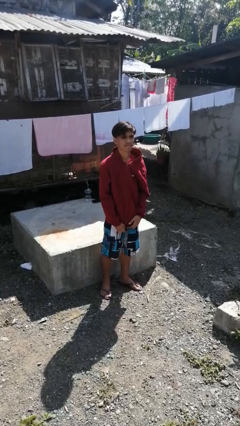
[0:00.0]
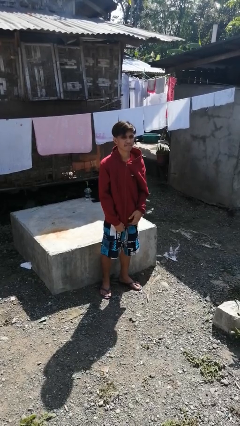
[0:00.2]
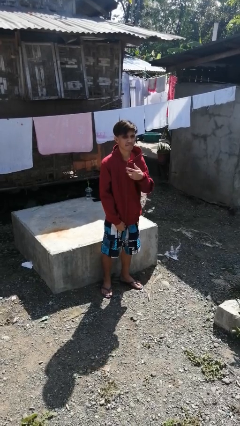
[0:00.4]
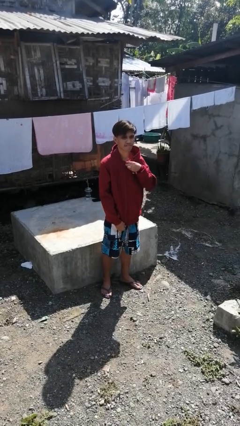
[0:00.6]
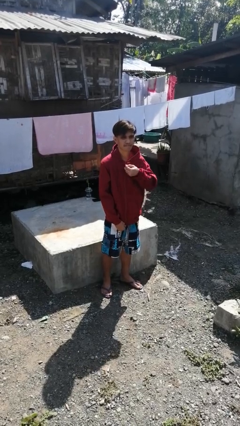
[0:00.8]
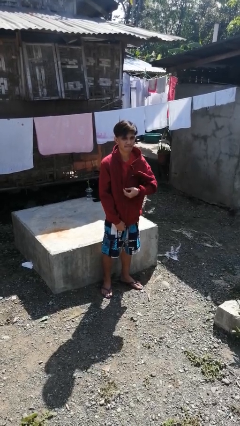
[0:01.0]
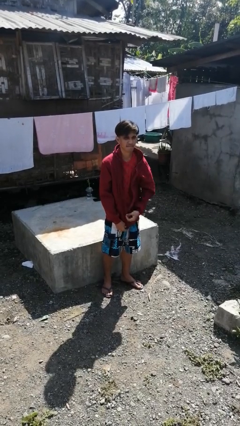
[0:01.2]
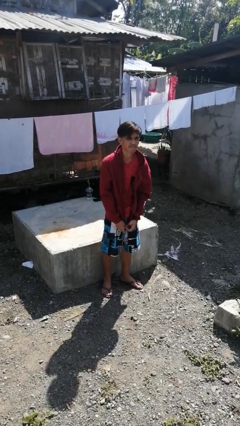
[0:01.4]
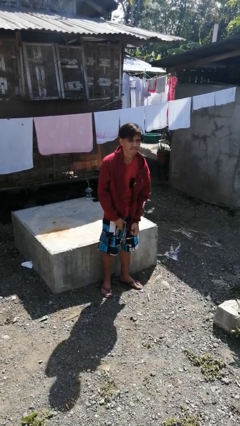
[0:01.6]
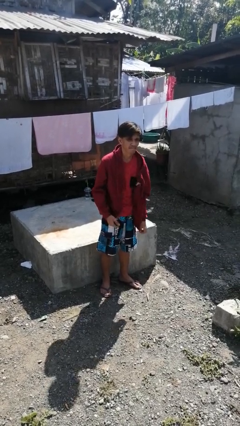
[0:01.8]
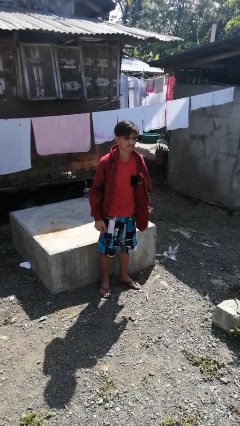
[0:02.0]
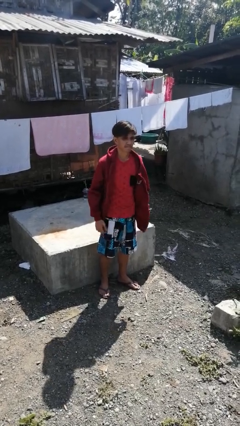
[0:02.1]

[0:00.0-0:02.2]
person unzips jacket

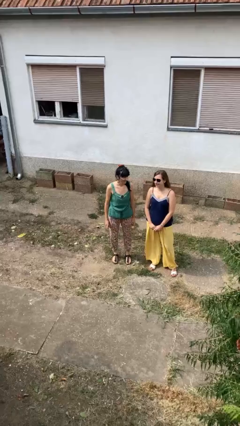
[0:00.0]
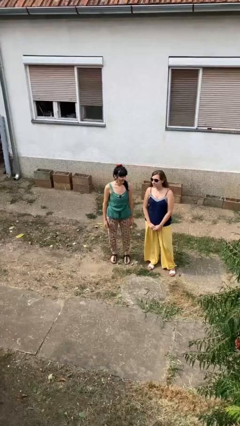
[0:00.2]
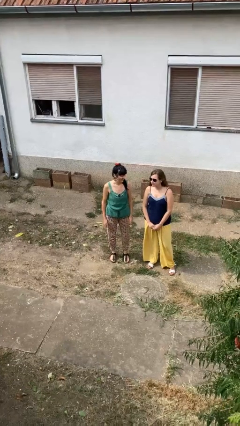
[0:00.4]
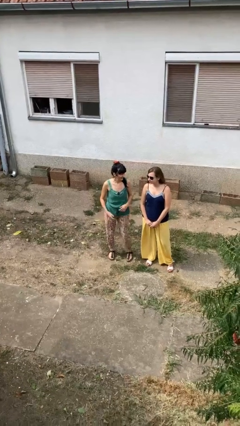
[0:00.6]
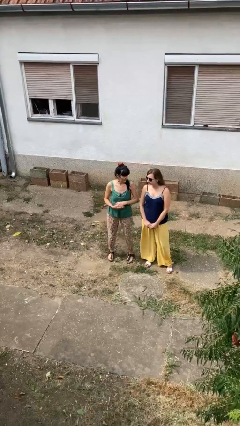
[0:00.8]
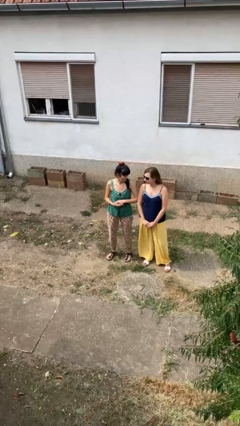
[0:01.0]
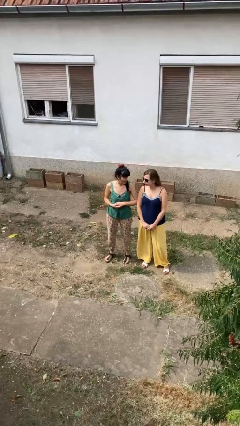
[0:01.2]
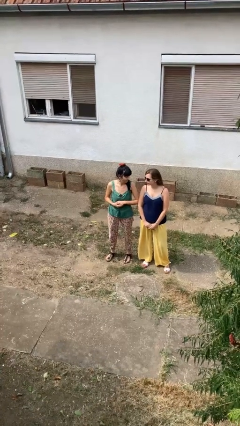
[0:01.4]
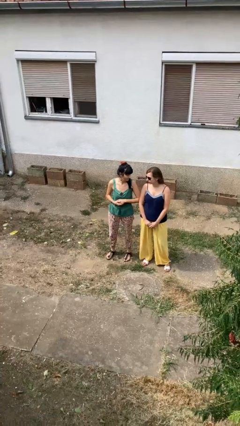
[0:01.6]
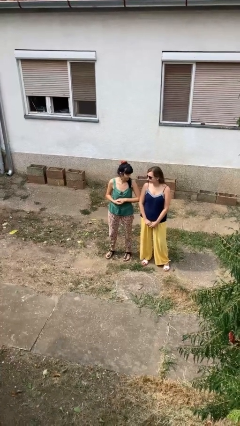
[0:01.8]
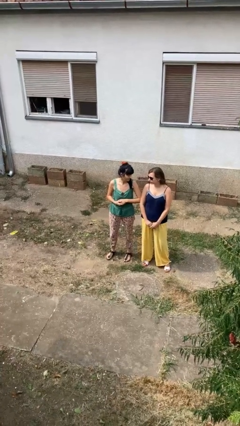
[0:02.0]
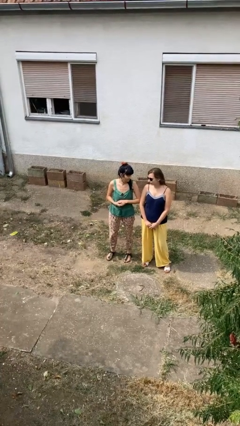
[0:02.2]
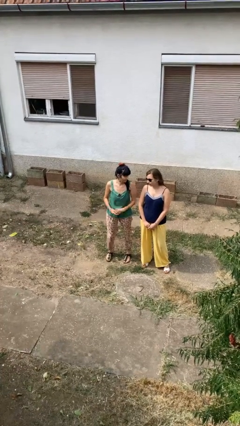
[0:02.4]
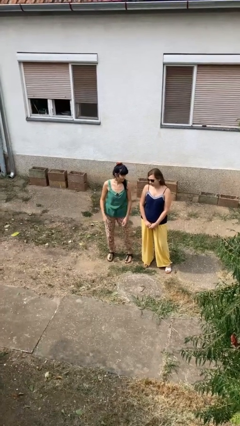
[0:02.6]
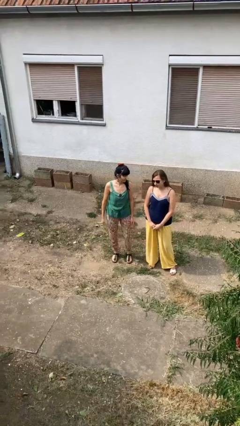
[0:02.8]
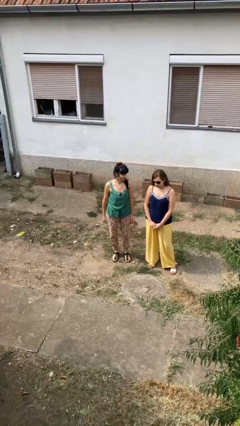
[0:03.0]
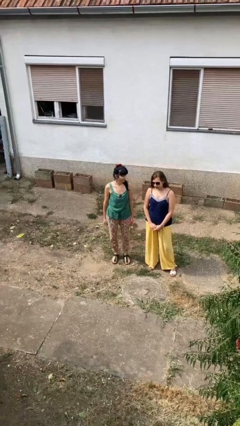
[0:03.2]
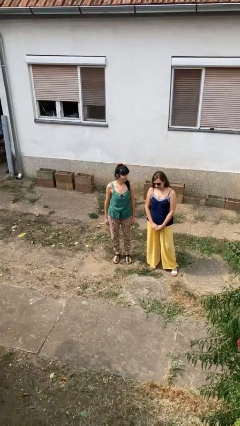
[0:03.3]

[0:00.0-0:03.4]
person nudges person with elbow

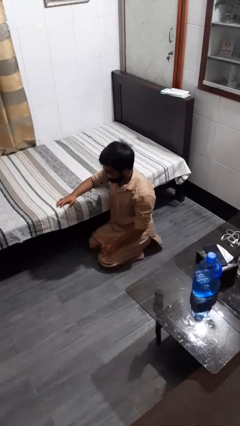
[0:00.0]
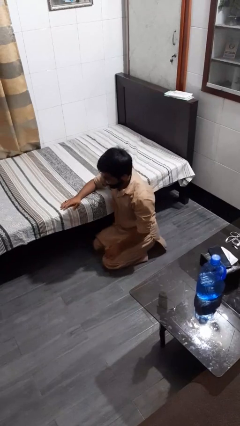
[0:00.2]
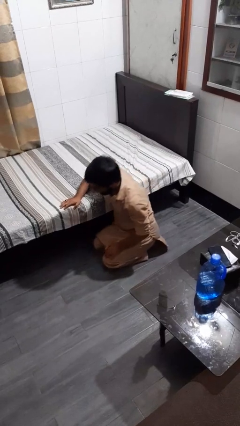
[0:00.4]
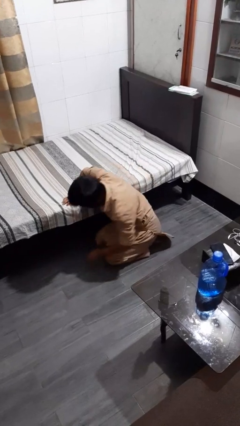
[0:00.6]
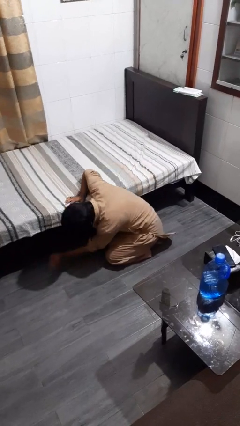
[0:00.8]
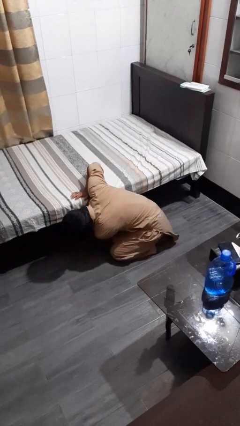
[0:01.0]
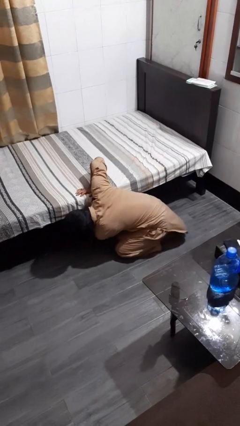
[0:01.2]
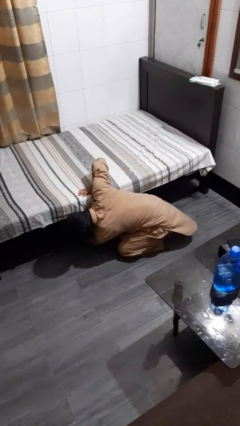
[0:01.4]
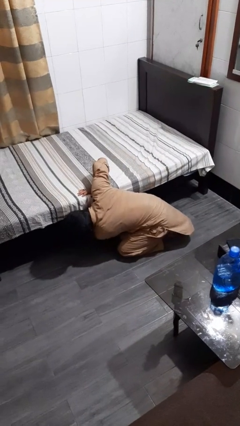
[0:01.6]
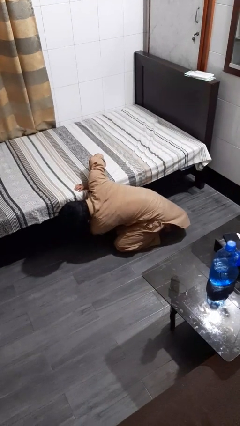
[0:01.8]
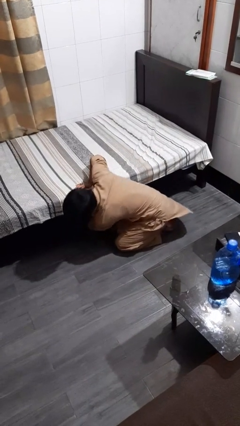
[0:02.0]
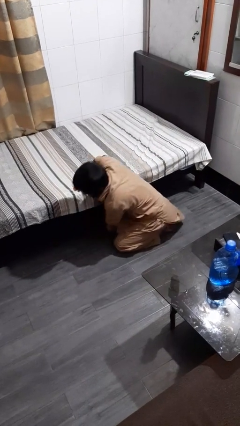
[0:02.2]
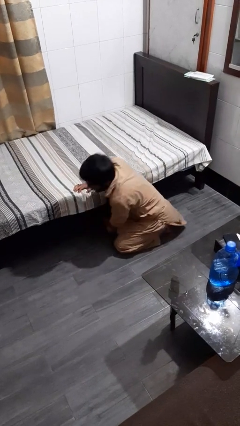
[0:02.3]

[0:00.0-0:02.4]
person searches under bed

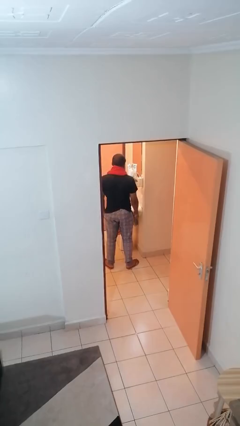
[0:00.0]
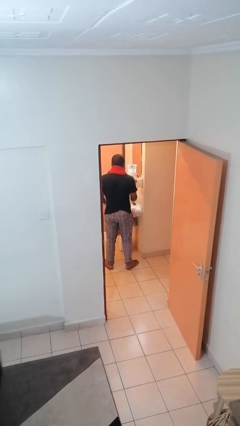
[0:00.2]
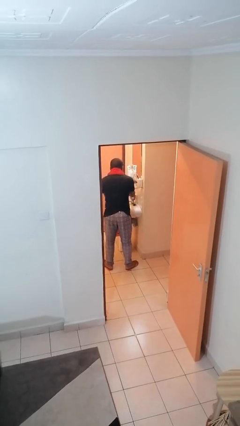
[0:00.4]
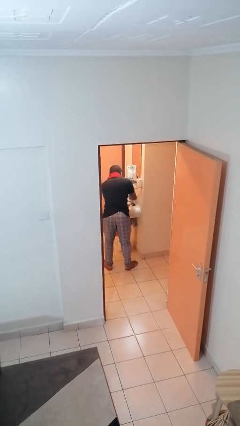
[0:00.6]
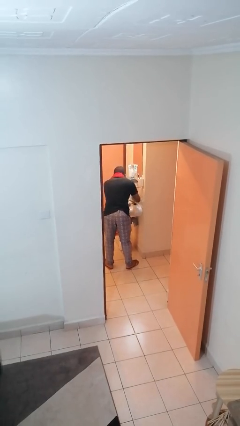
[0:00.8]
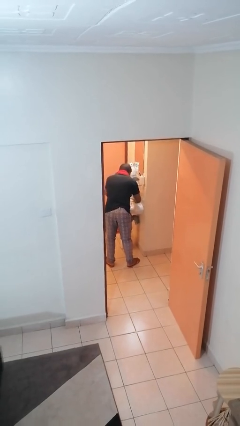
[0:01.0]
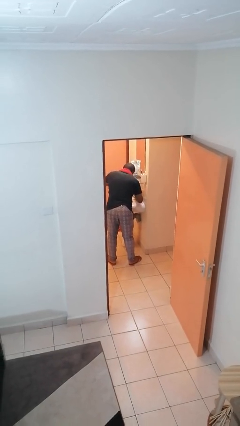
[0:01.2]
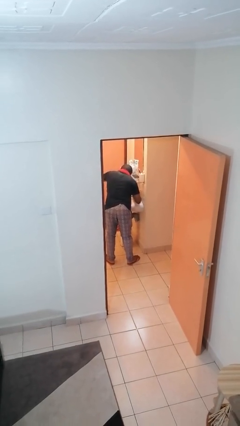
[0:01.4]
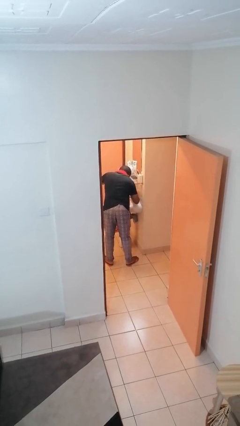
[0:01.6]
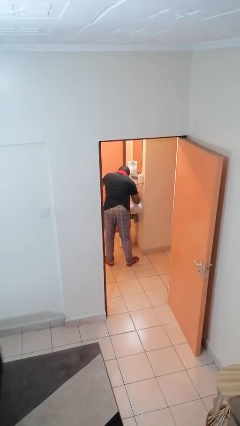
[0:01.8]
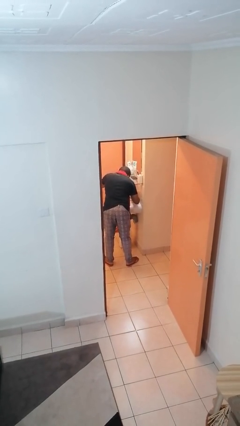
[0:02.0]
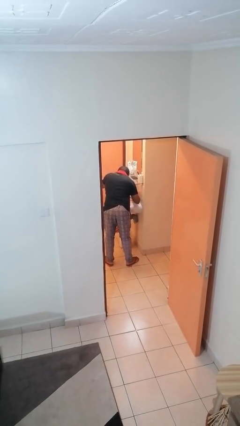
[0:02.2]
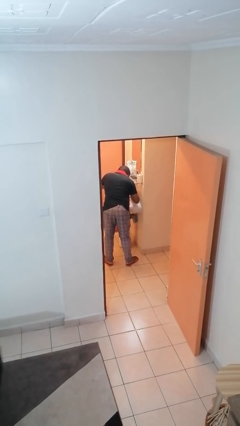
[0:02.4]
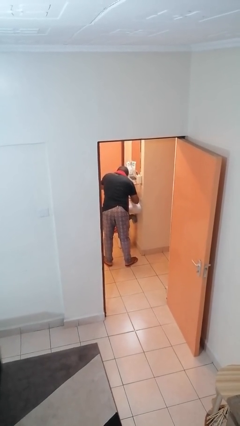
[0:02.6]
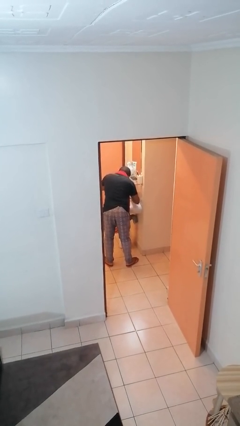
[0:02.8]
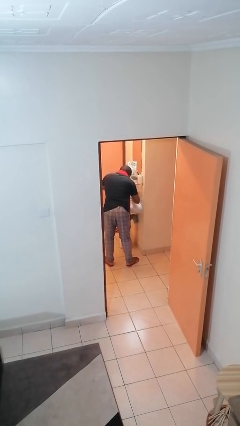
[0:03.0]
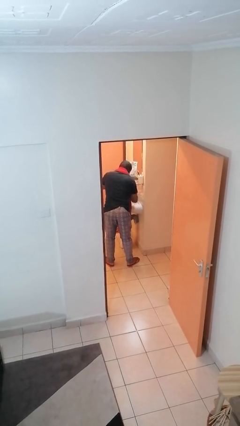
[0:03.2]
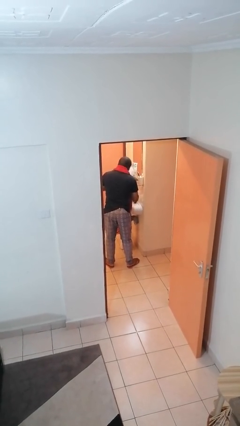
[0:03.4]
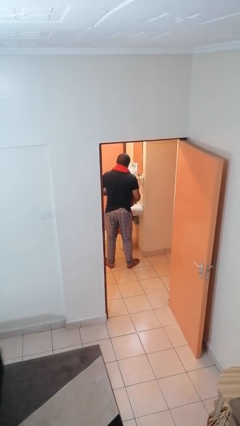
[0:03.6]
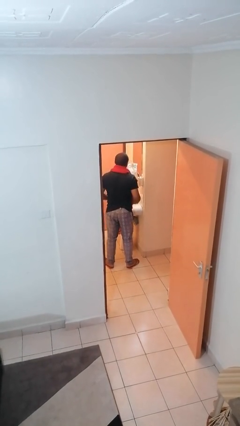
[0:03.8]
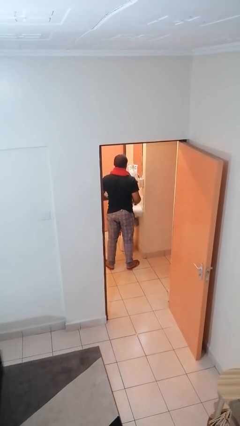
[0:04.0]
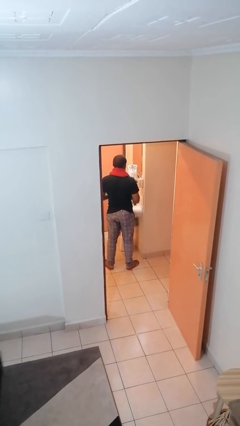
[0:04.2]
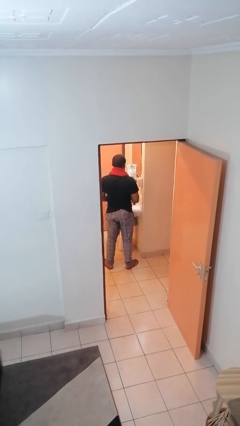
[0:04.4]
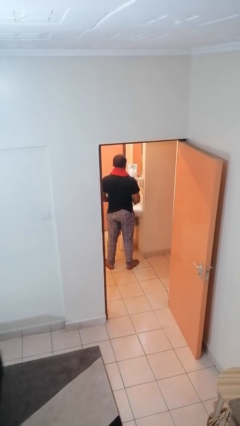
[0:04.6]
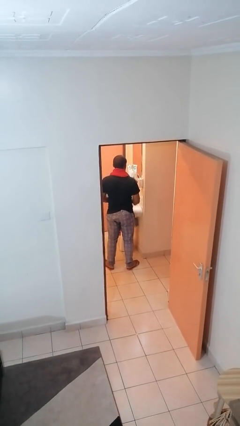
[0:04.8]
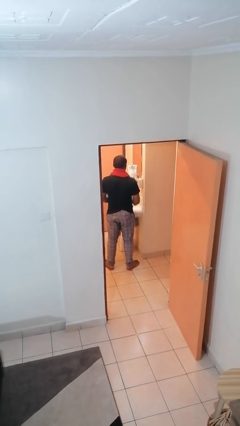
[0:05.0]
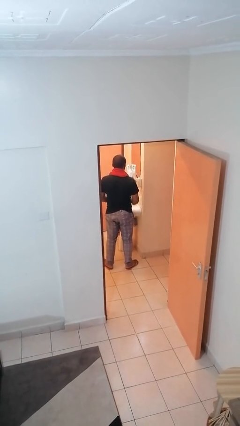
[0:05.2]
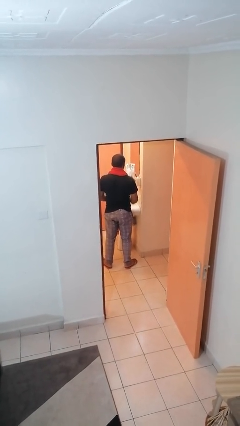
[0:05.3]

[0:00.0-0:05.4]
person washes face

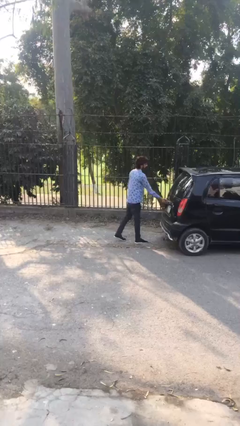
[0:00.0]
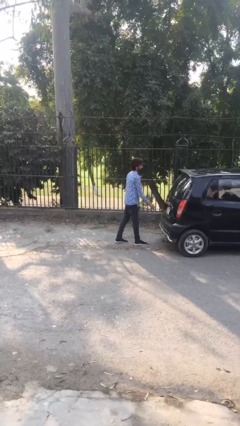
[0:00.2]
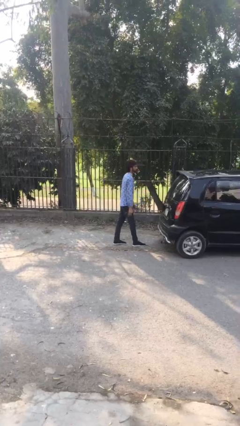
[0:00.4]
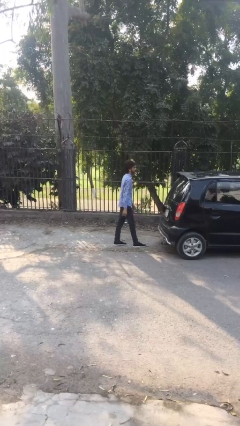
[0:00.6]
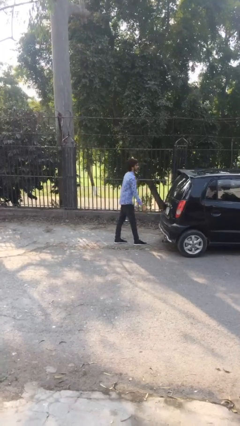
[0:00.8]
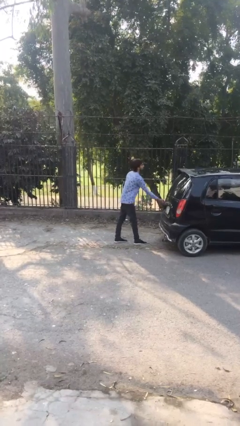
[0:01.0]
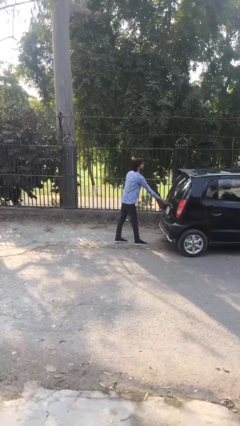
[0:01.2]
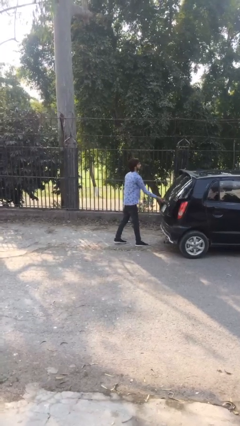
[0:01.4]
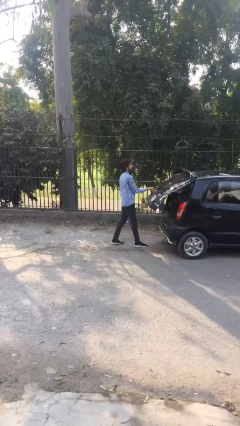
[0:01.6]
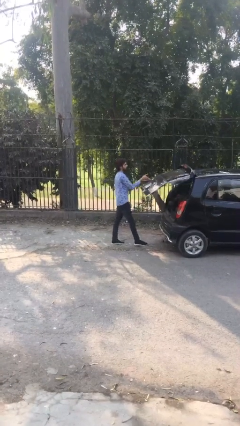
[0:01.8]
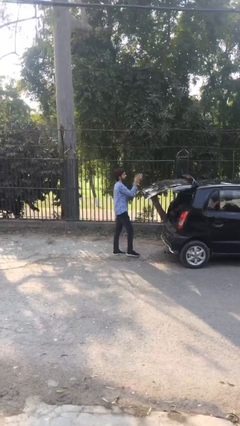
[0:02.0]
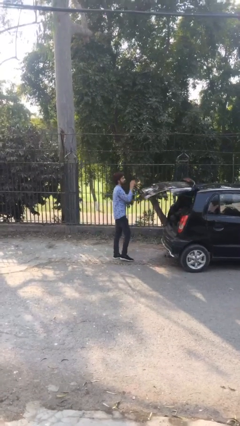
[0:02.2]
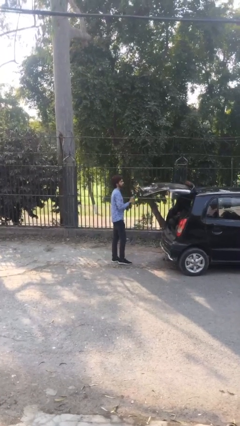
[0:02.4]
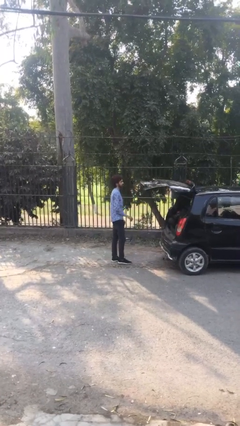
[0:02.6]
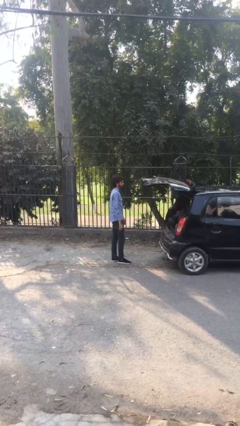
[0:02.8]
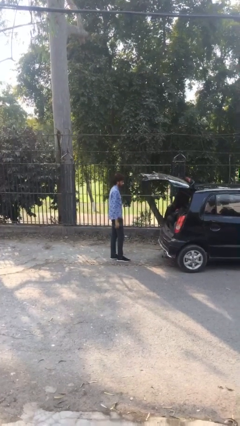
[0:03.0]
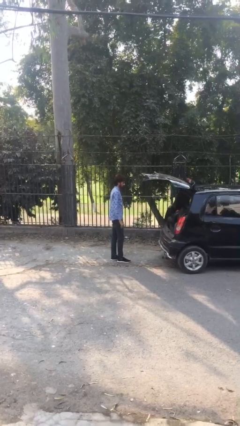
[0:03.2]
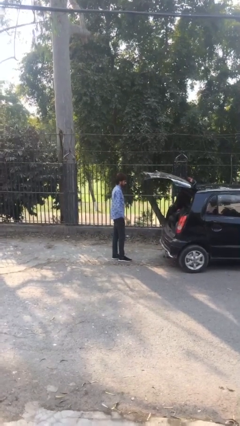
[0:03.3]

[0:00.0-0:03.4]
person opens car trunk

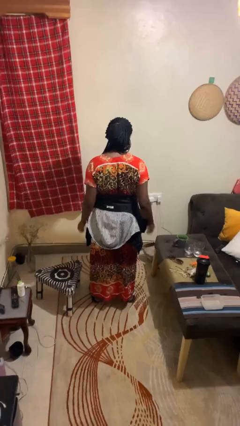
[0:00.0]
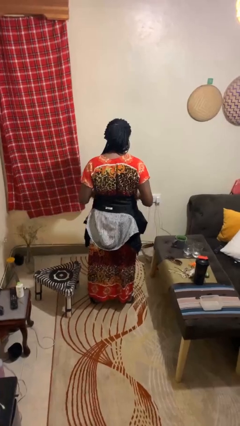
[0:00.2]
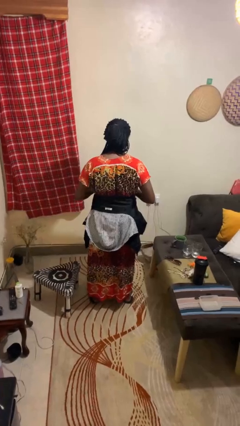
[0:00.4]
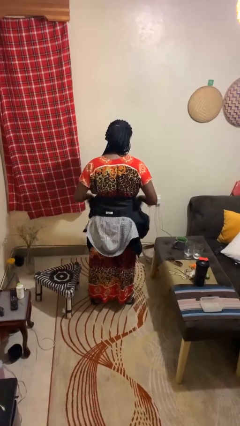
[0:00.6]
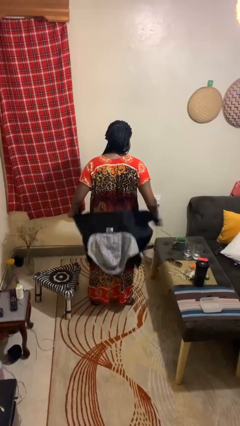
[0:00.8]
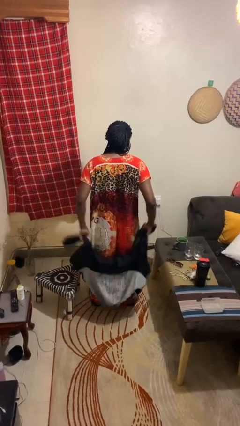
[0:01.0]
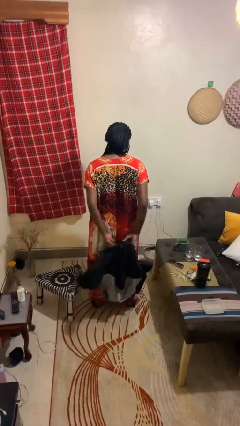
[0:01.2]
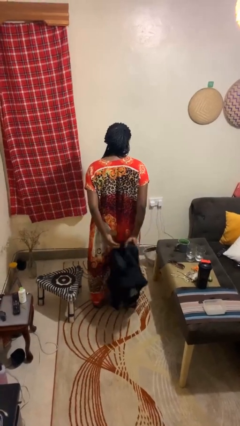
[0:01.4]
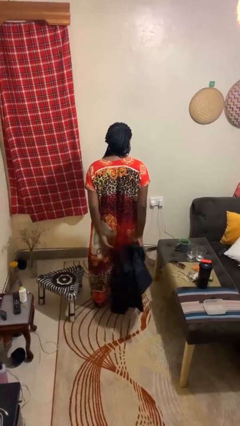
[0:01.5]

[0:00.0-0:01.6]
person unties jacket around waist
